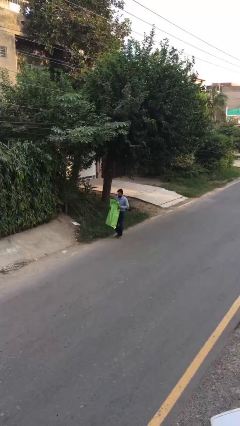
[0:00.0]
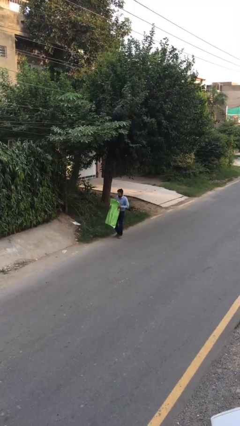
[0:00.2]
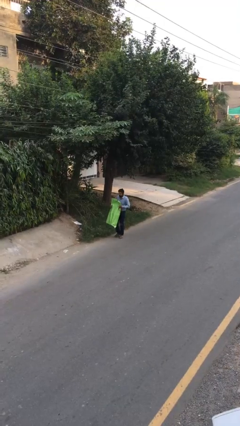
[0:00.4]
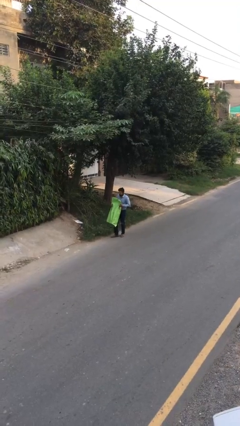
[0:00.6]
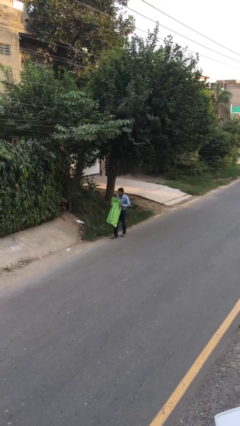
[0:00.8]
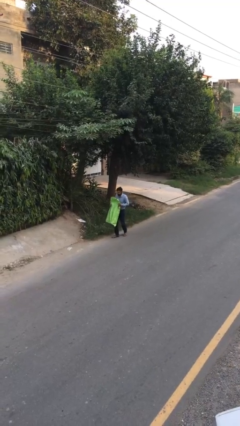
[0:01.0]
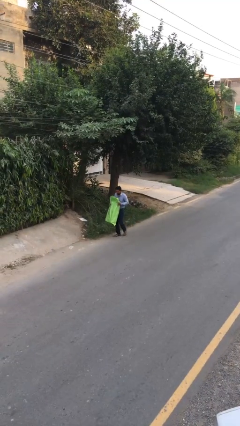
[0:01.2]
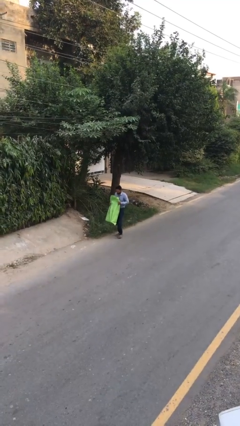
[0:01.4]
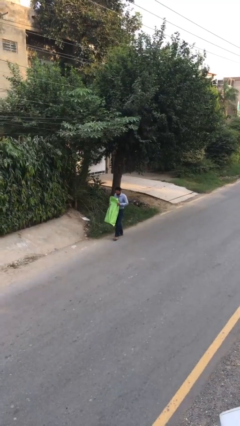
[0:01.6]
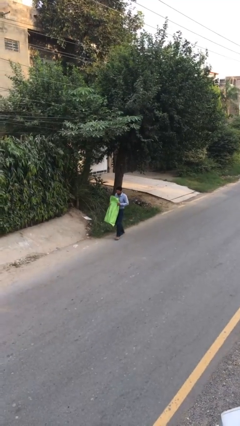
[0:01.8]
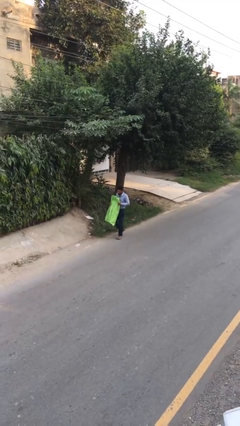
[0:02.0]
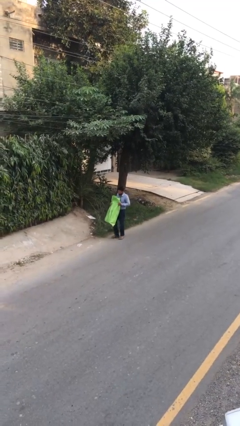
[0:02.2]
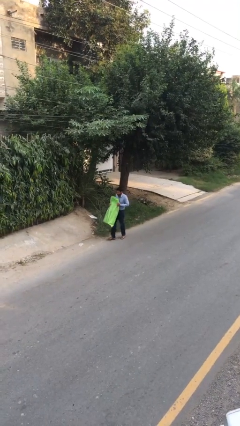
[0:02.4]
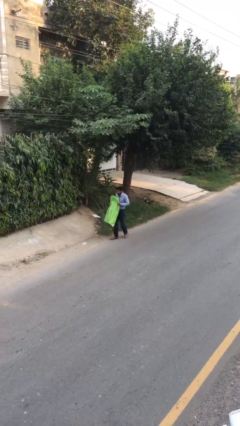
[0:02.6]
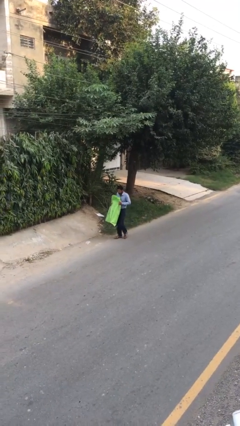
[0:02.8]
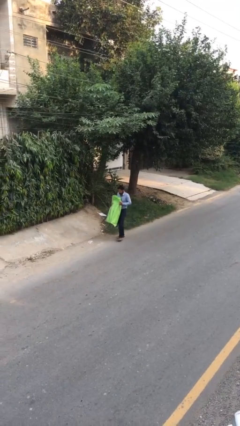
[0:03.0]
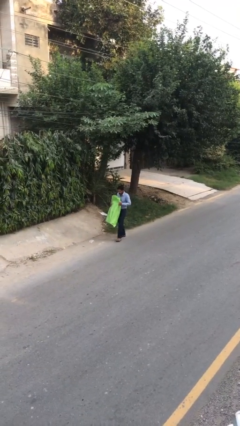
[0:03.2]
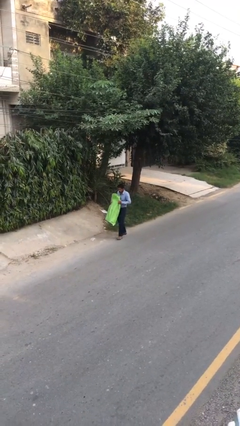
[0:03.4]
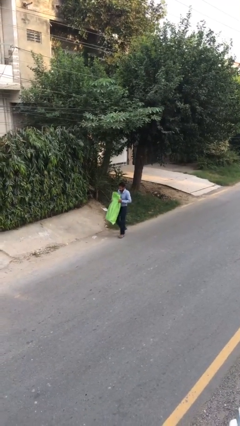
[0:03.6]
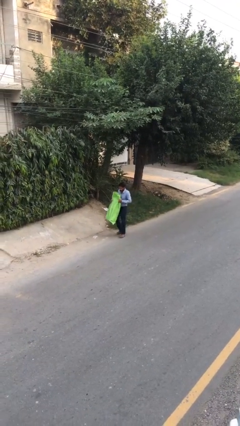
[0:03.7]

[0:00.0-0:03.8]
person carries heavy object

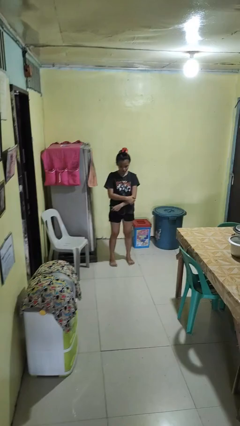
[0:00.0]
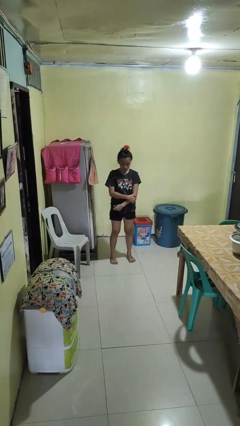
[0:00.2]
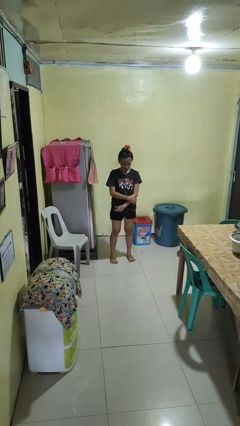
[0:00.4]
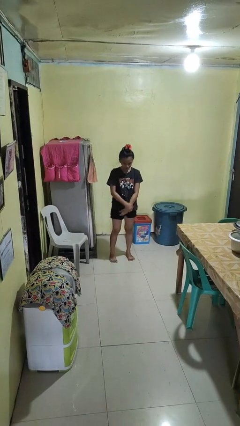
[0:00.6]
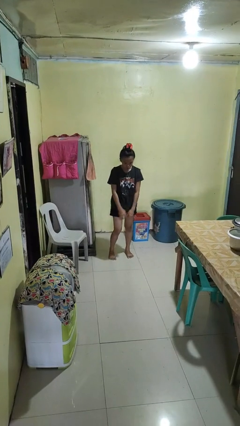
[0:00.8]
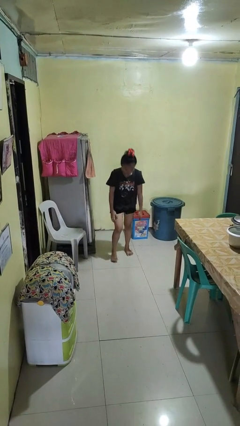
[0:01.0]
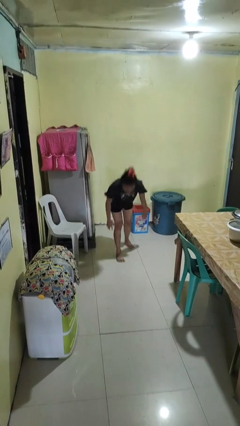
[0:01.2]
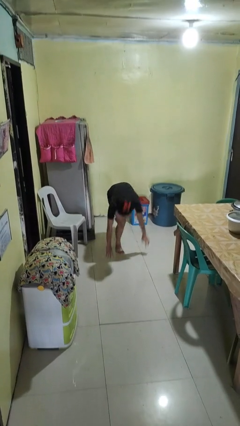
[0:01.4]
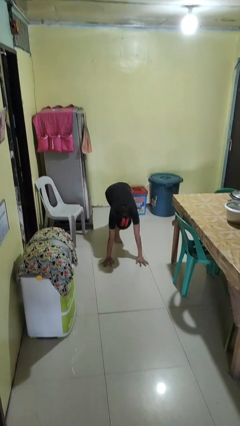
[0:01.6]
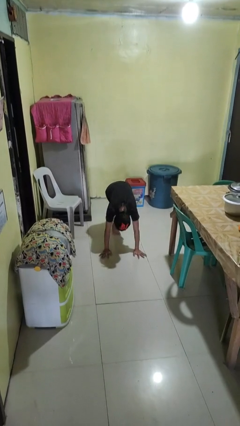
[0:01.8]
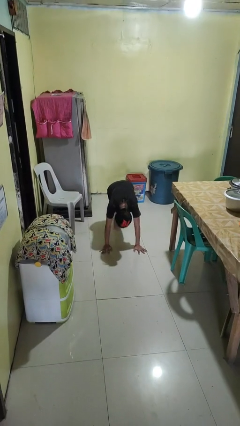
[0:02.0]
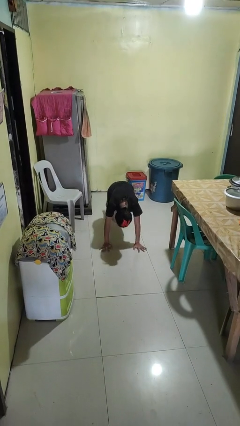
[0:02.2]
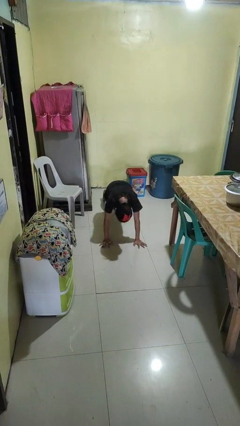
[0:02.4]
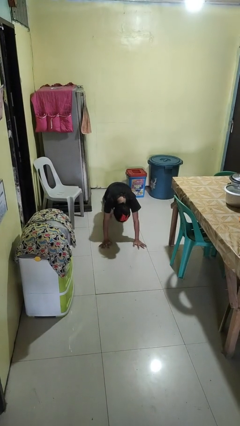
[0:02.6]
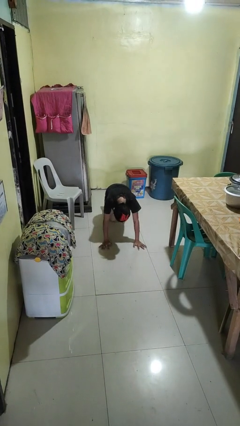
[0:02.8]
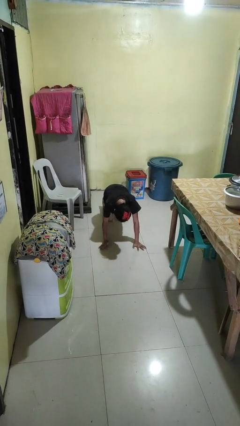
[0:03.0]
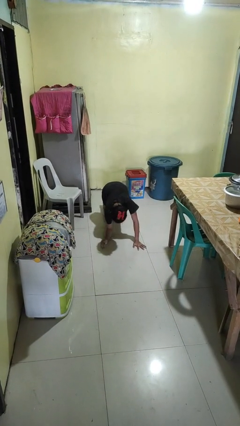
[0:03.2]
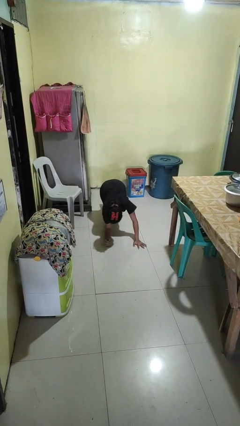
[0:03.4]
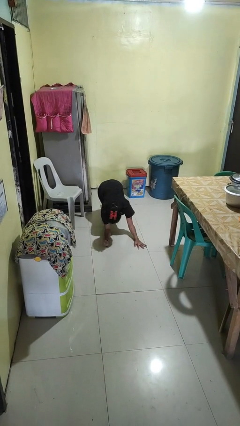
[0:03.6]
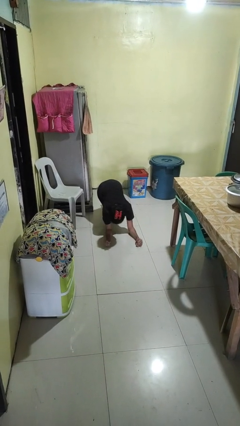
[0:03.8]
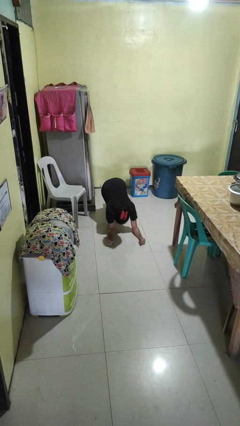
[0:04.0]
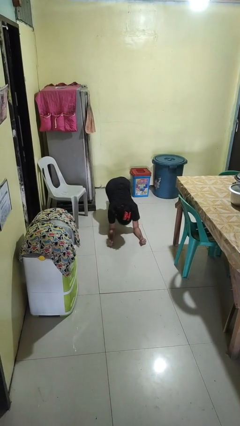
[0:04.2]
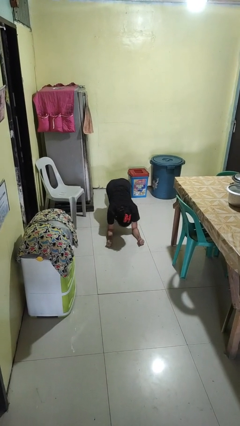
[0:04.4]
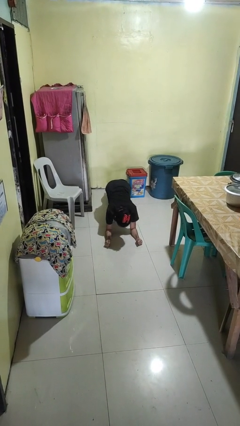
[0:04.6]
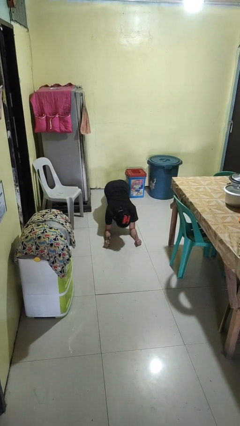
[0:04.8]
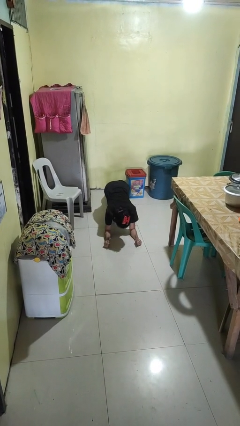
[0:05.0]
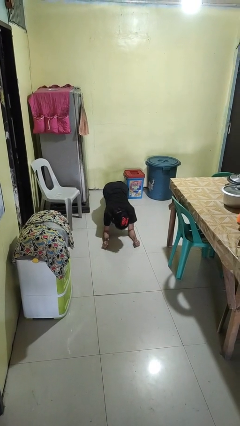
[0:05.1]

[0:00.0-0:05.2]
person exercises with plank

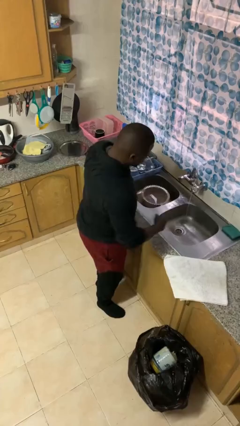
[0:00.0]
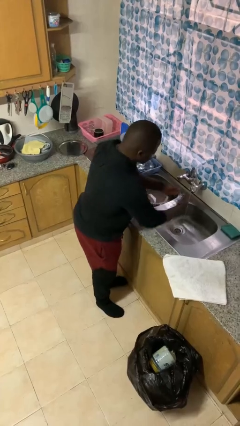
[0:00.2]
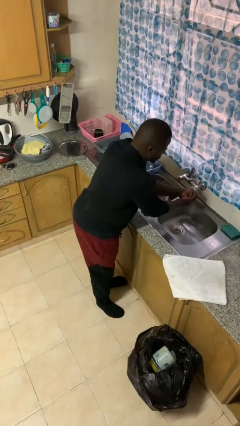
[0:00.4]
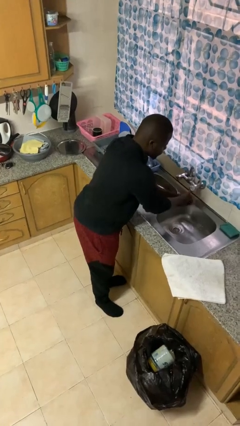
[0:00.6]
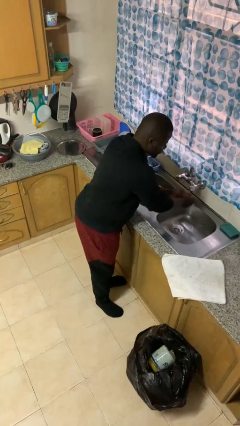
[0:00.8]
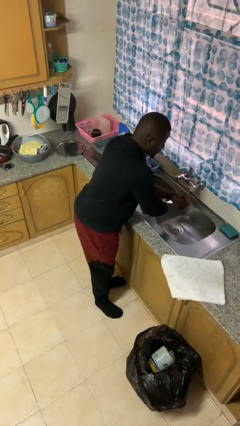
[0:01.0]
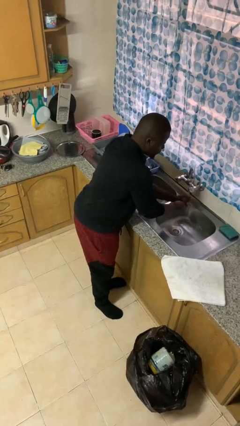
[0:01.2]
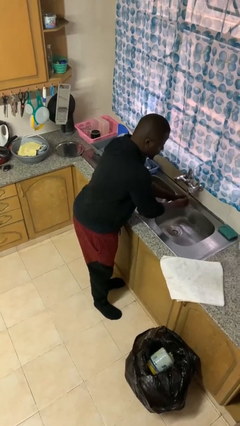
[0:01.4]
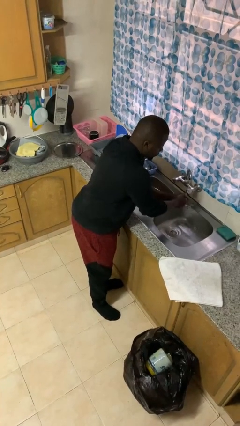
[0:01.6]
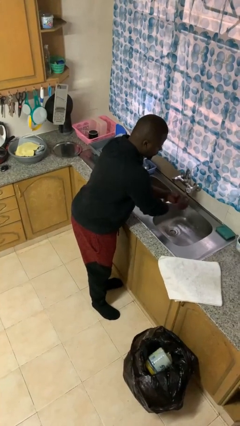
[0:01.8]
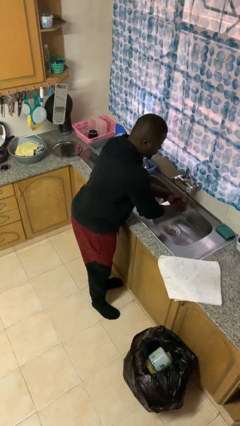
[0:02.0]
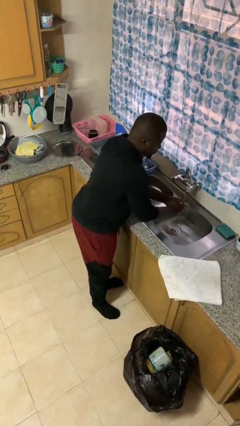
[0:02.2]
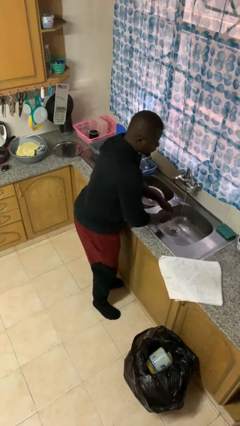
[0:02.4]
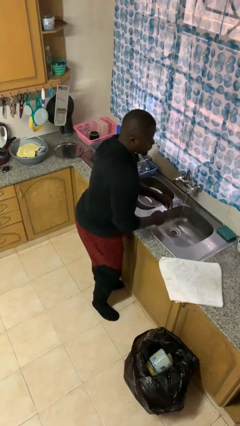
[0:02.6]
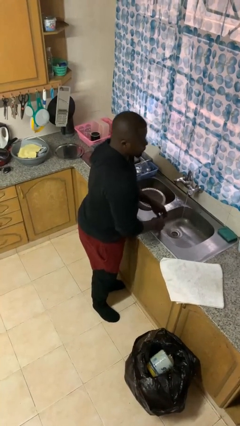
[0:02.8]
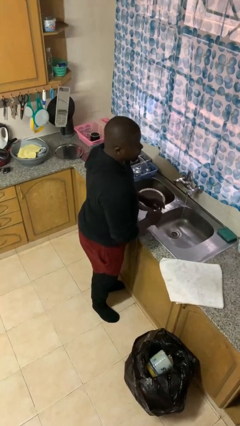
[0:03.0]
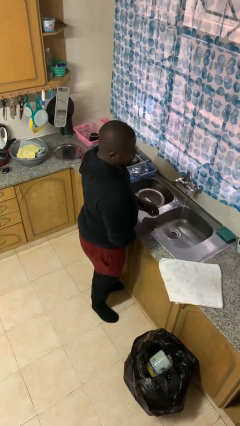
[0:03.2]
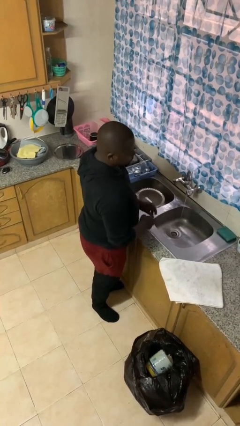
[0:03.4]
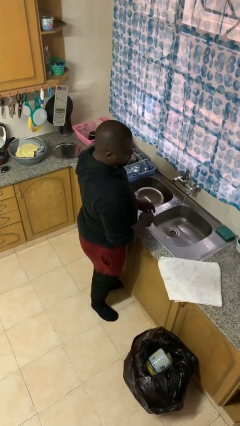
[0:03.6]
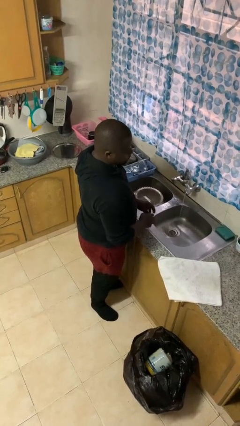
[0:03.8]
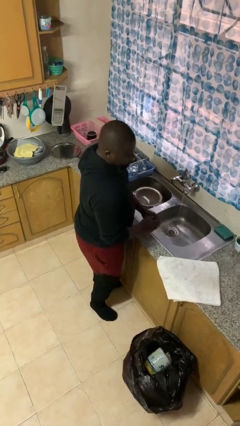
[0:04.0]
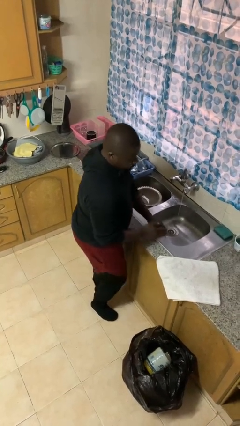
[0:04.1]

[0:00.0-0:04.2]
person washes hands

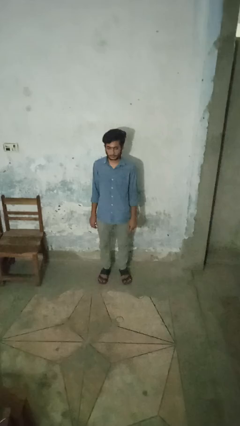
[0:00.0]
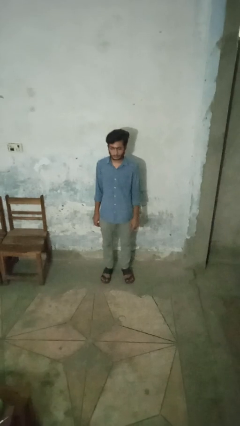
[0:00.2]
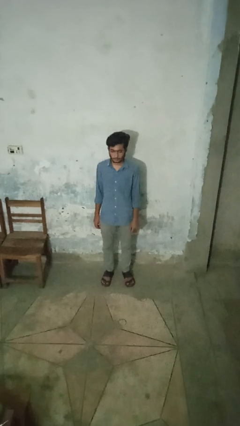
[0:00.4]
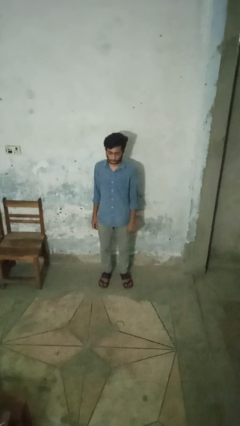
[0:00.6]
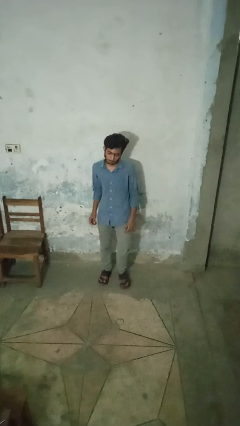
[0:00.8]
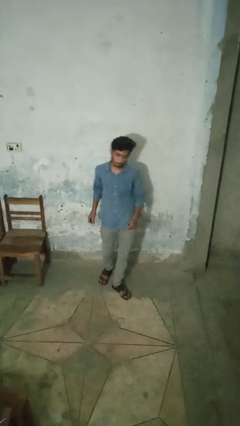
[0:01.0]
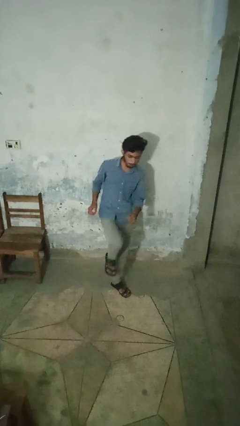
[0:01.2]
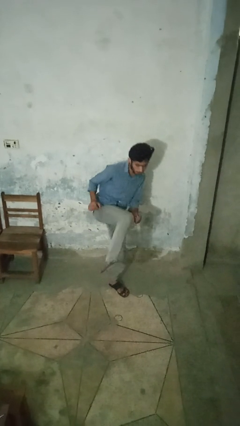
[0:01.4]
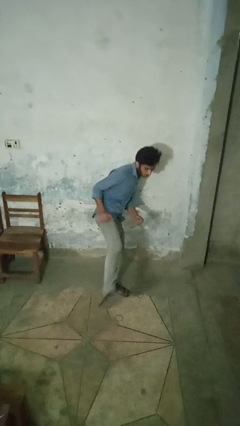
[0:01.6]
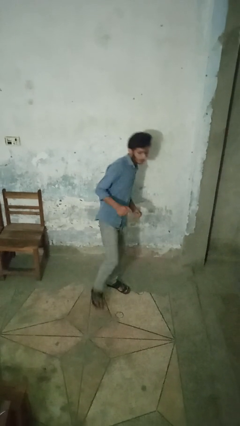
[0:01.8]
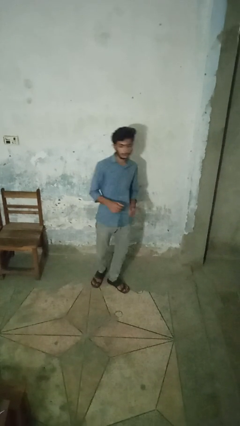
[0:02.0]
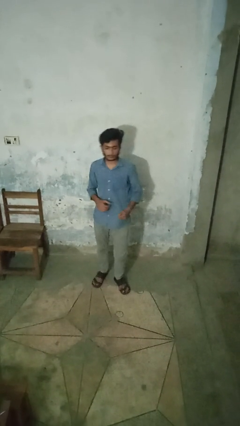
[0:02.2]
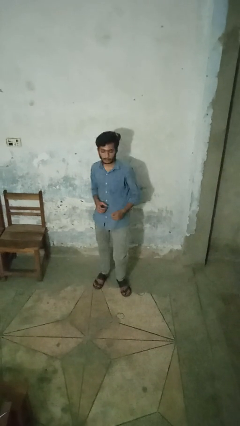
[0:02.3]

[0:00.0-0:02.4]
person karate kicks

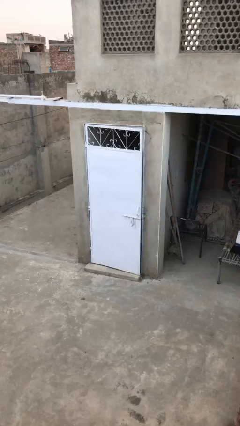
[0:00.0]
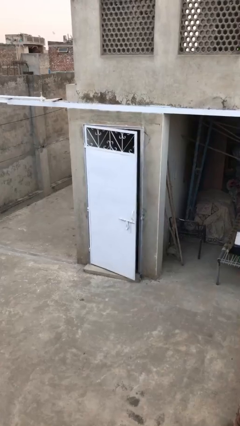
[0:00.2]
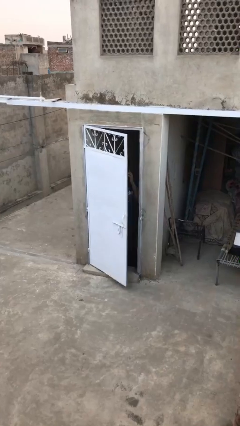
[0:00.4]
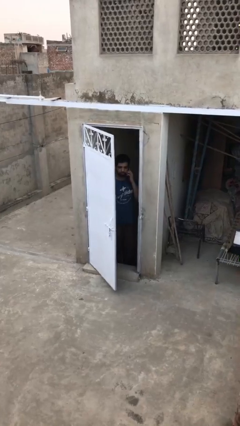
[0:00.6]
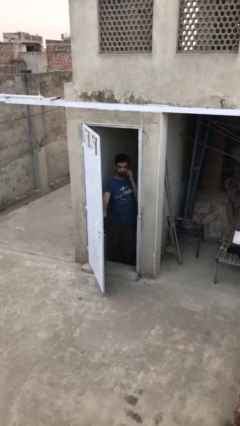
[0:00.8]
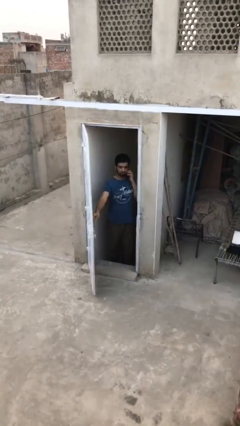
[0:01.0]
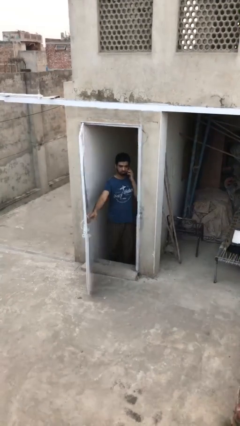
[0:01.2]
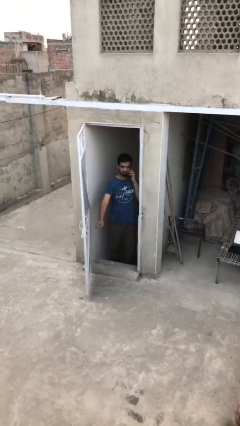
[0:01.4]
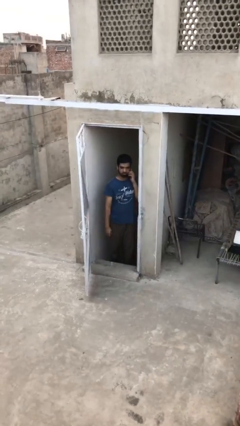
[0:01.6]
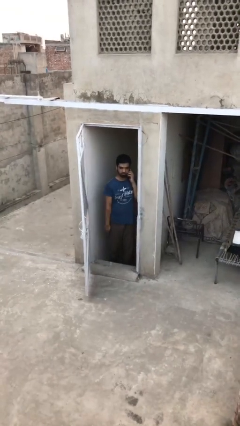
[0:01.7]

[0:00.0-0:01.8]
person opens facility door

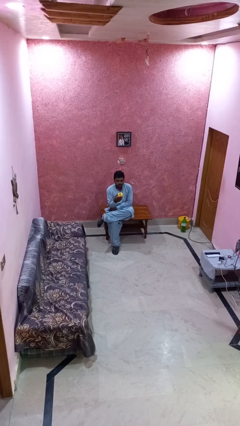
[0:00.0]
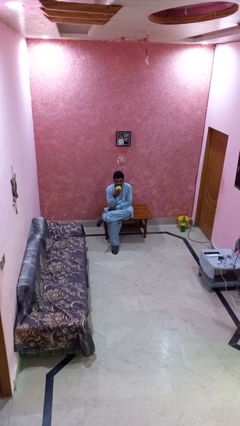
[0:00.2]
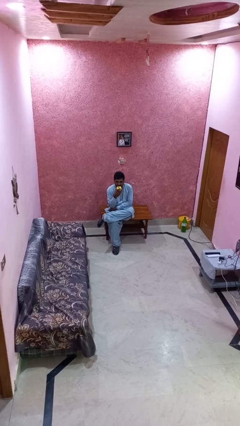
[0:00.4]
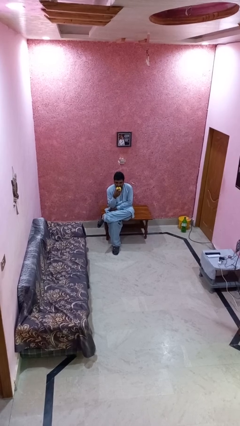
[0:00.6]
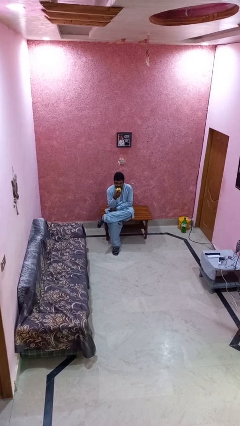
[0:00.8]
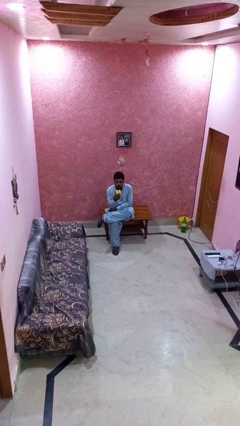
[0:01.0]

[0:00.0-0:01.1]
person eats apple
